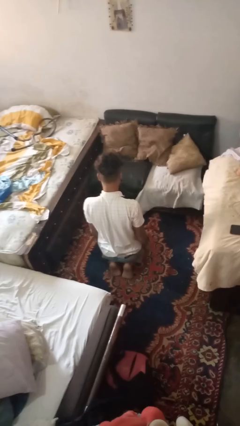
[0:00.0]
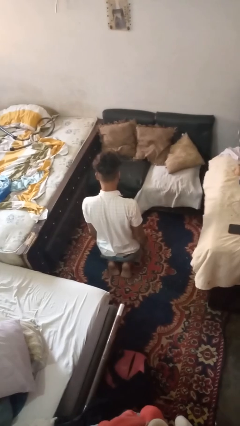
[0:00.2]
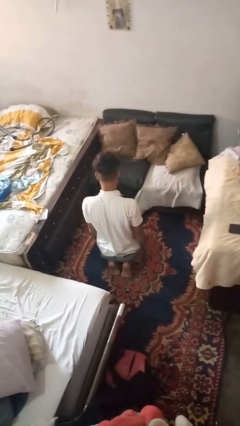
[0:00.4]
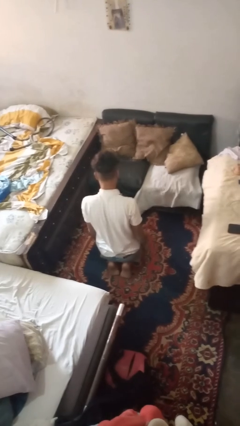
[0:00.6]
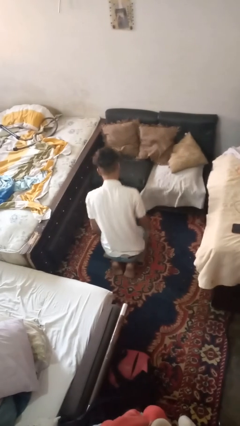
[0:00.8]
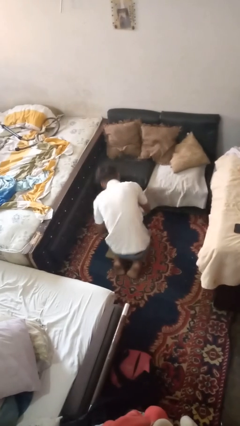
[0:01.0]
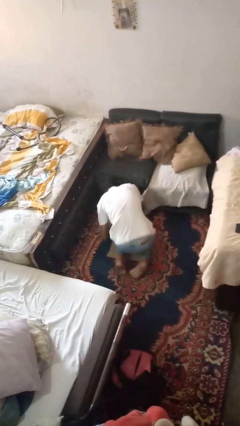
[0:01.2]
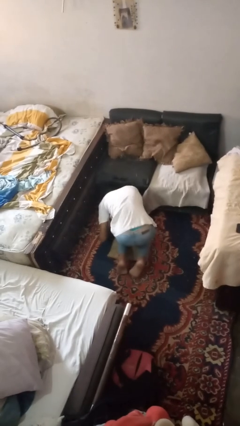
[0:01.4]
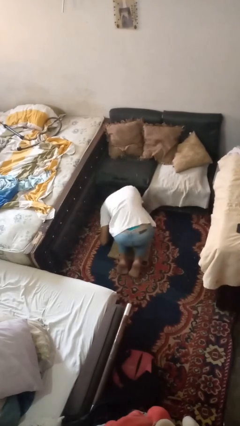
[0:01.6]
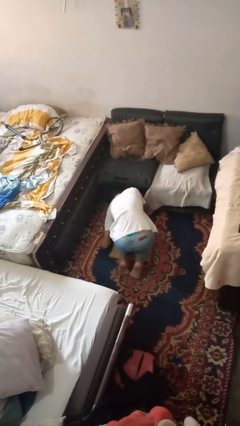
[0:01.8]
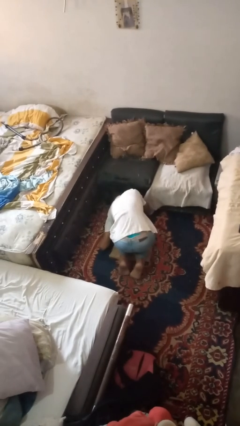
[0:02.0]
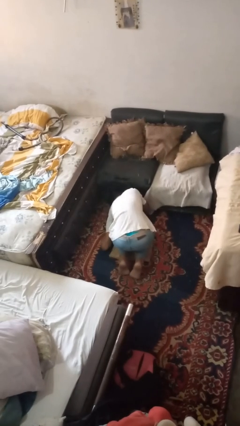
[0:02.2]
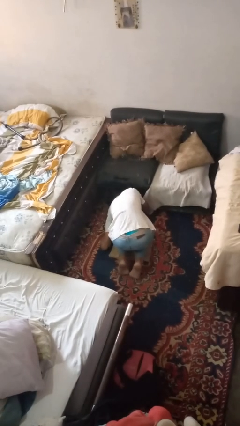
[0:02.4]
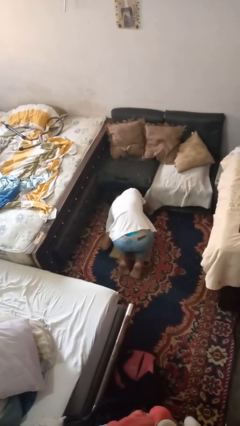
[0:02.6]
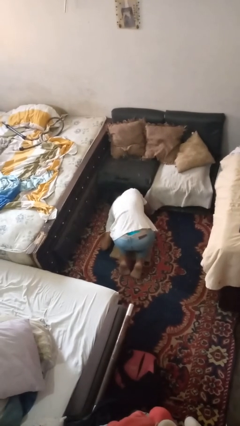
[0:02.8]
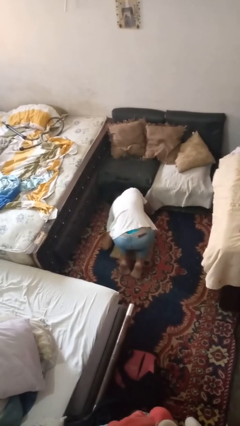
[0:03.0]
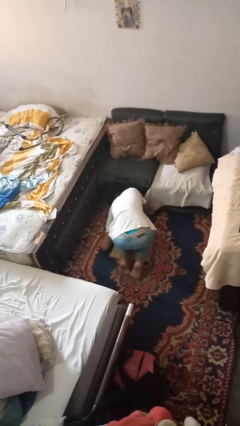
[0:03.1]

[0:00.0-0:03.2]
person searches under couch

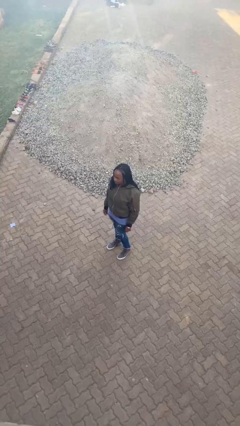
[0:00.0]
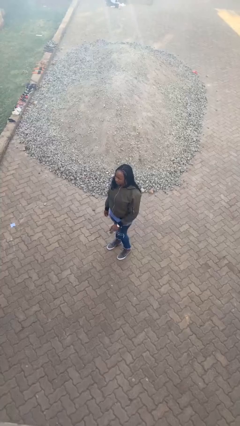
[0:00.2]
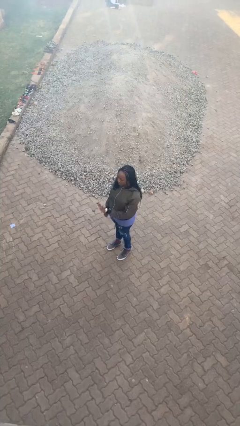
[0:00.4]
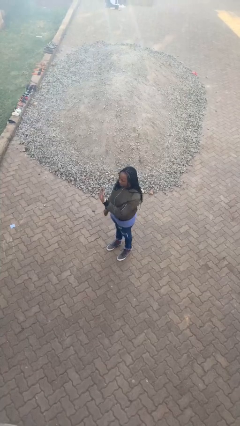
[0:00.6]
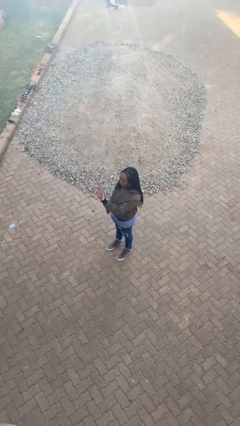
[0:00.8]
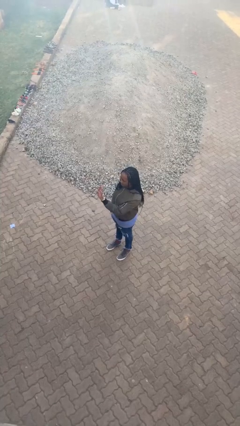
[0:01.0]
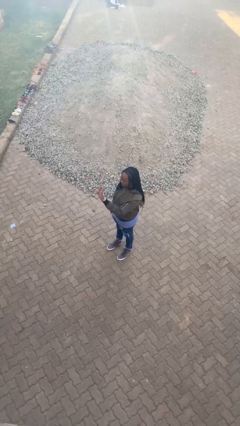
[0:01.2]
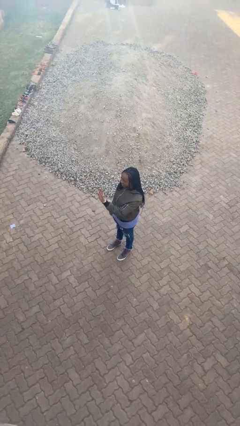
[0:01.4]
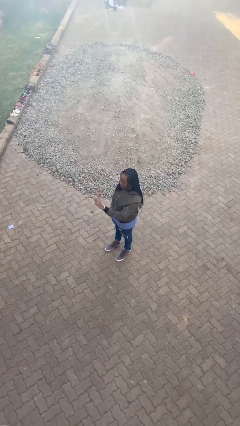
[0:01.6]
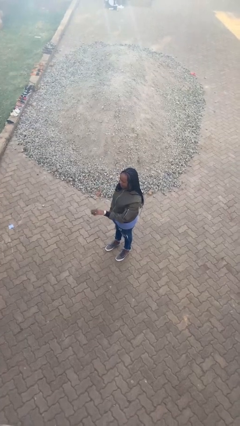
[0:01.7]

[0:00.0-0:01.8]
person gestures stop

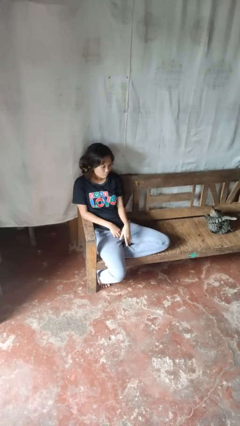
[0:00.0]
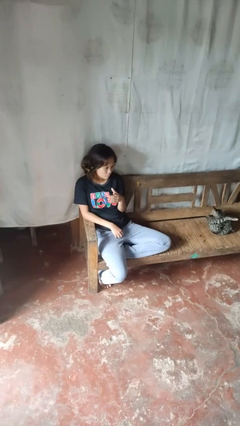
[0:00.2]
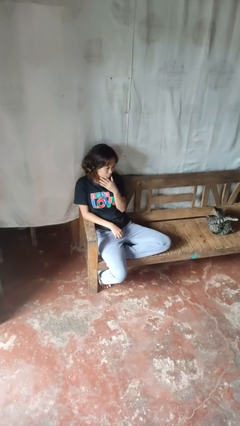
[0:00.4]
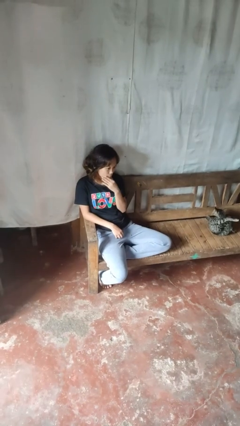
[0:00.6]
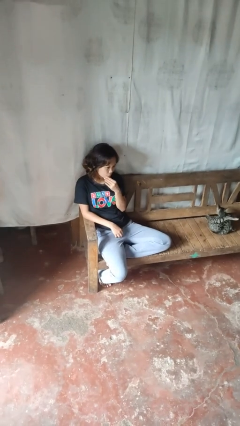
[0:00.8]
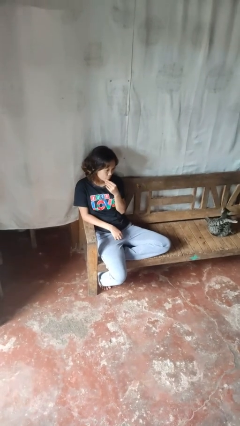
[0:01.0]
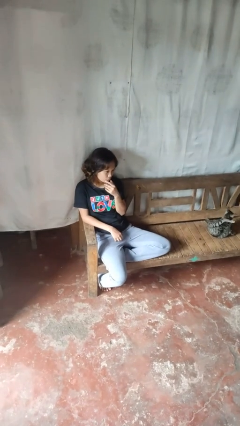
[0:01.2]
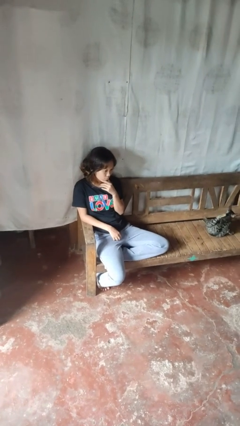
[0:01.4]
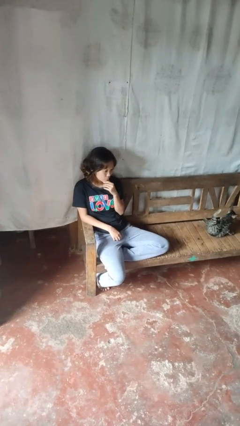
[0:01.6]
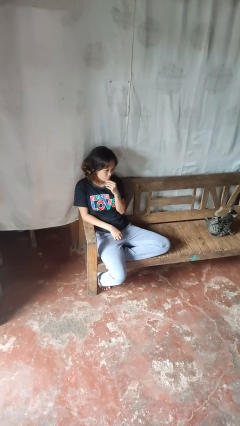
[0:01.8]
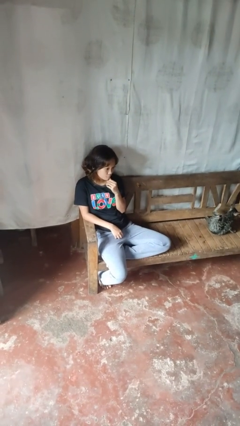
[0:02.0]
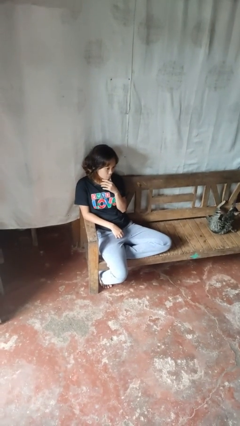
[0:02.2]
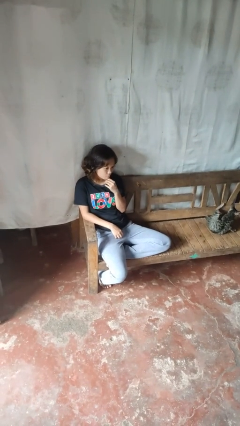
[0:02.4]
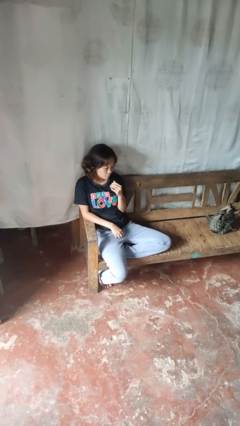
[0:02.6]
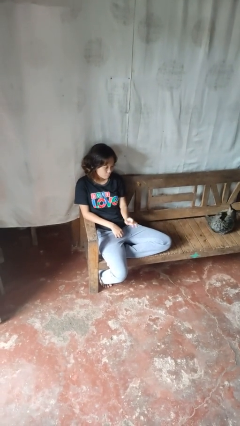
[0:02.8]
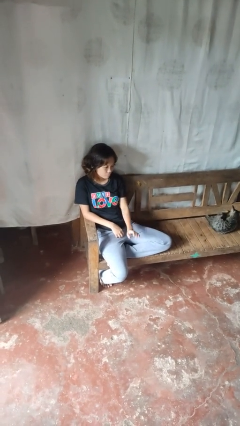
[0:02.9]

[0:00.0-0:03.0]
person strokes chin

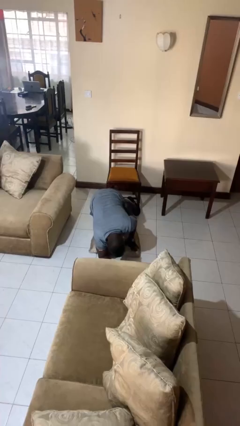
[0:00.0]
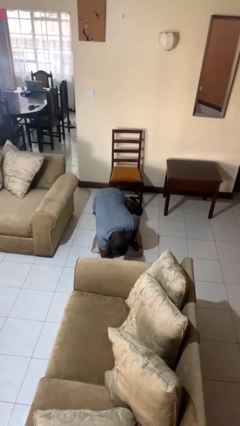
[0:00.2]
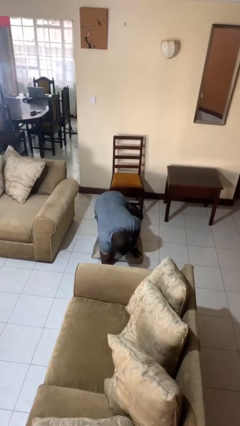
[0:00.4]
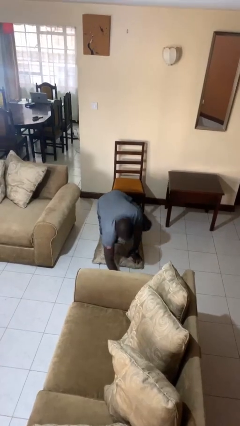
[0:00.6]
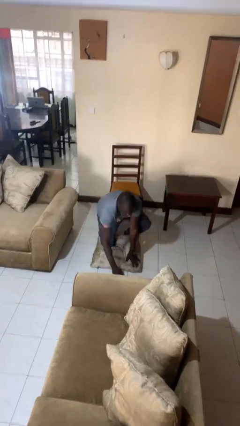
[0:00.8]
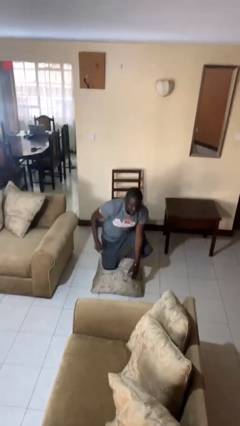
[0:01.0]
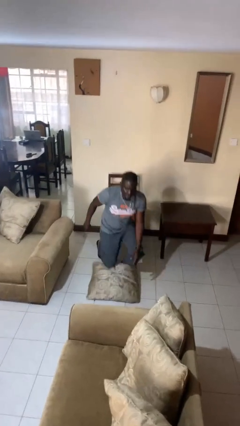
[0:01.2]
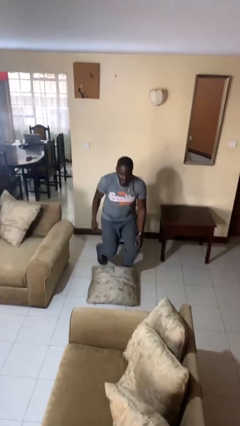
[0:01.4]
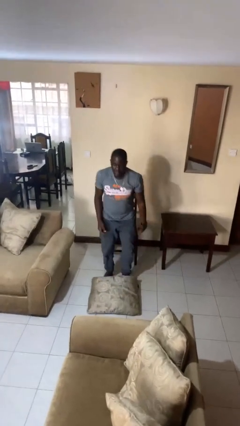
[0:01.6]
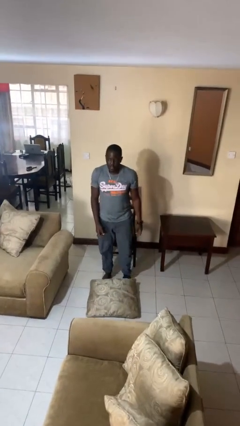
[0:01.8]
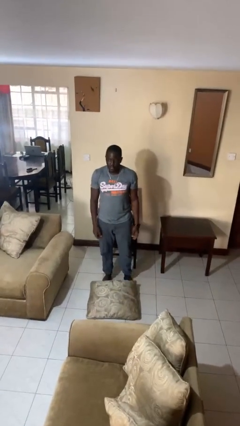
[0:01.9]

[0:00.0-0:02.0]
person stands up from floor

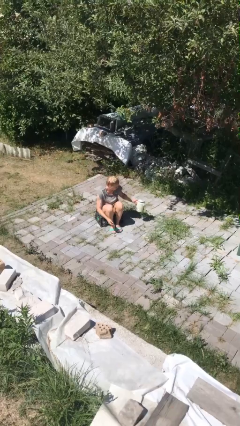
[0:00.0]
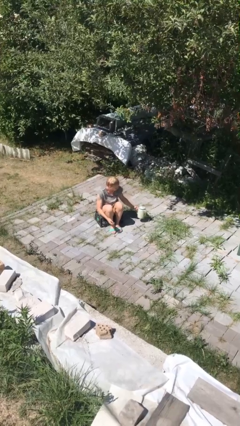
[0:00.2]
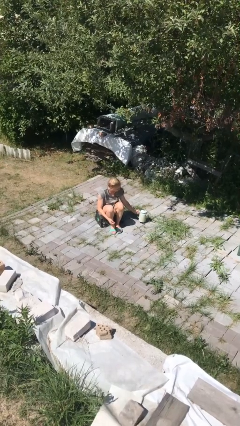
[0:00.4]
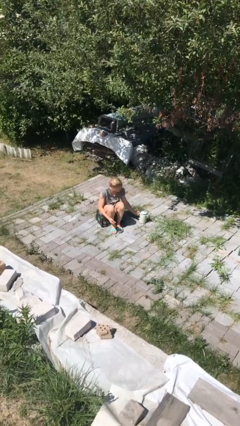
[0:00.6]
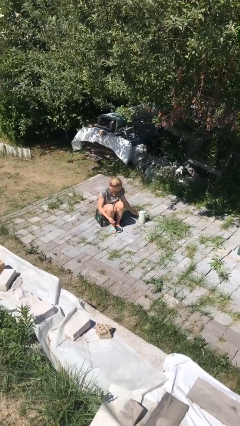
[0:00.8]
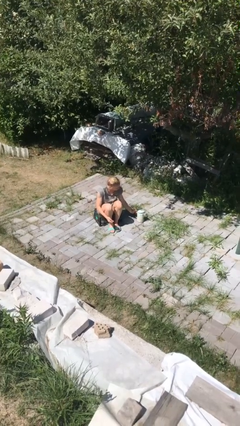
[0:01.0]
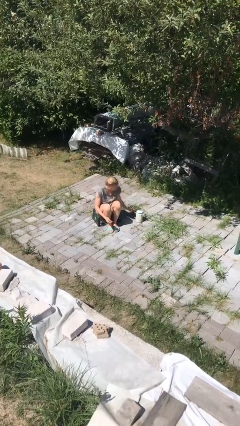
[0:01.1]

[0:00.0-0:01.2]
person puts down object on floor

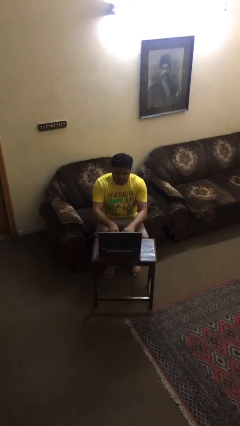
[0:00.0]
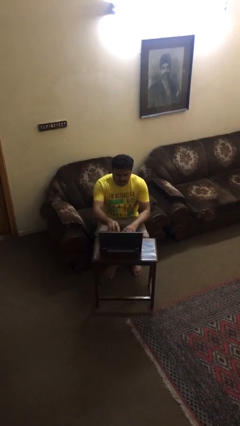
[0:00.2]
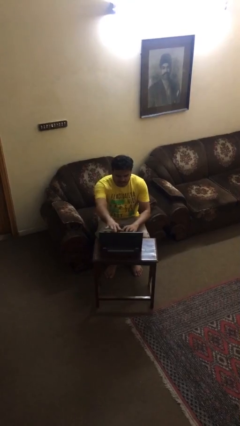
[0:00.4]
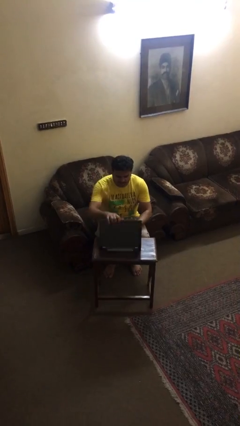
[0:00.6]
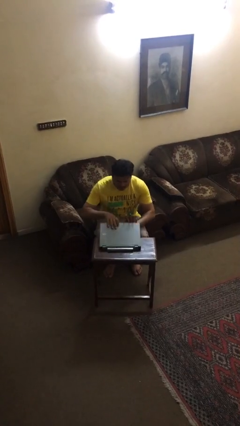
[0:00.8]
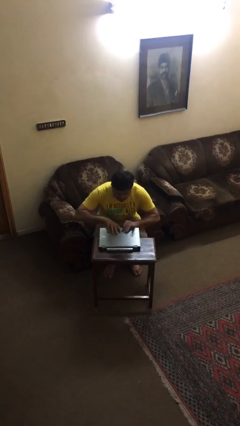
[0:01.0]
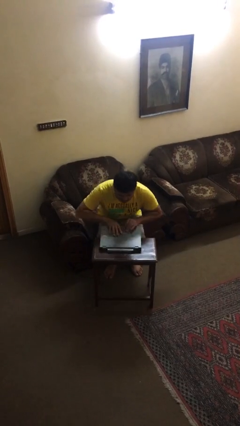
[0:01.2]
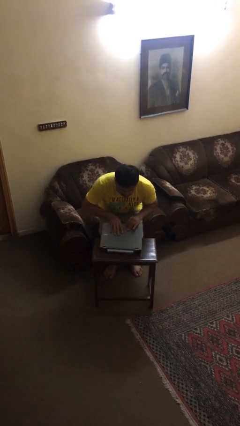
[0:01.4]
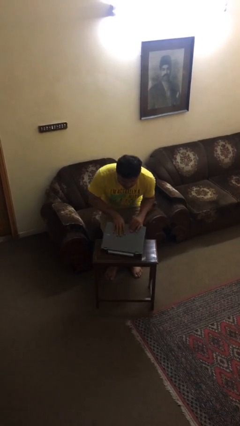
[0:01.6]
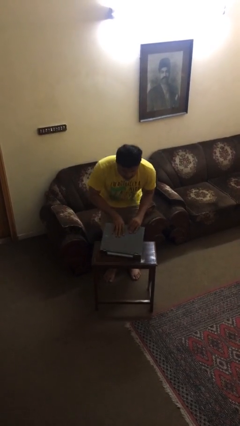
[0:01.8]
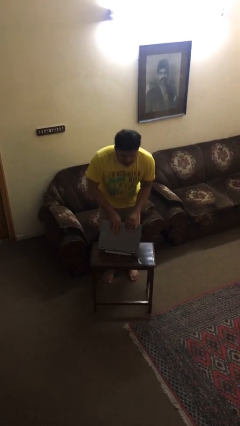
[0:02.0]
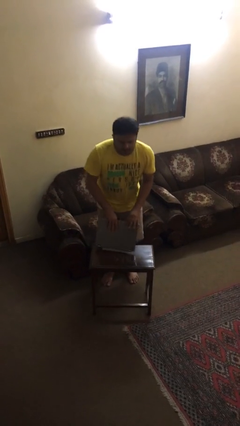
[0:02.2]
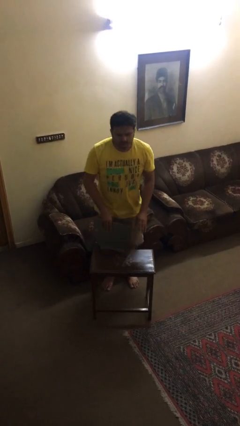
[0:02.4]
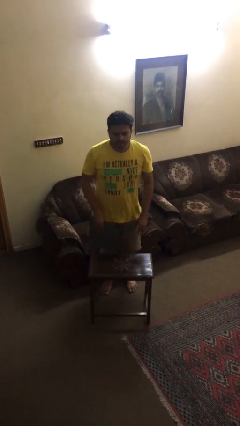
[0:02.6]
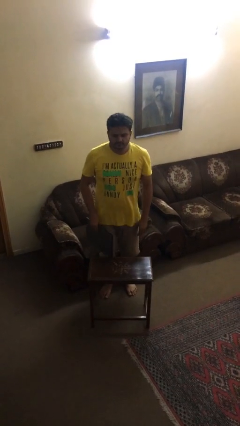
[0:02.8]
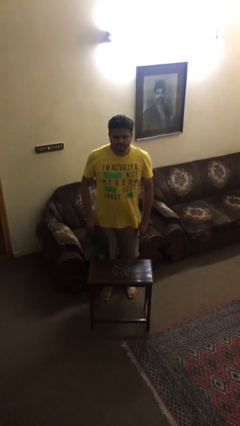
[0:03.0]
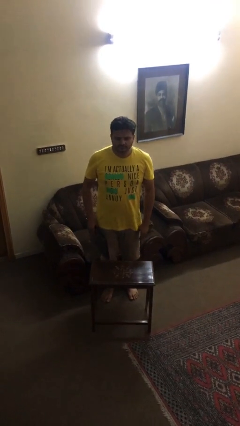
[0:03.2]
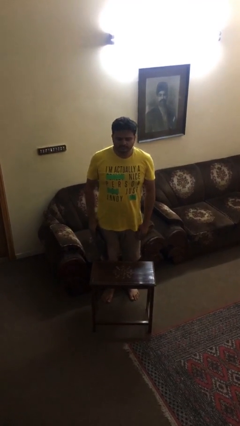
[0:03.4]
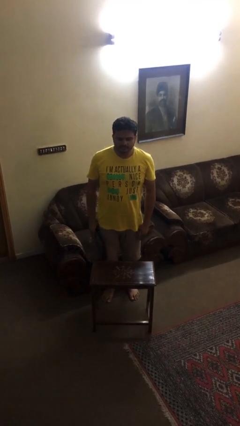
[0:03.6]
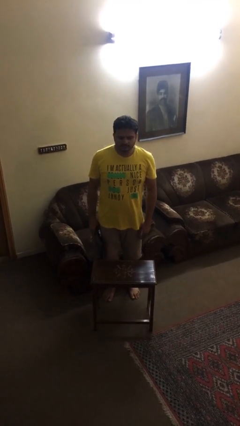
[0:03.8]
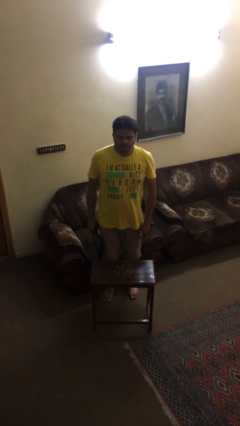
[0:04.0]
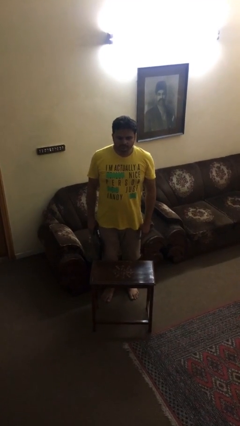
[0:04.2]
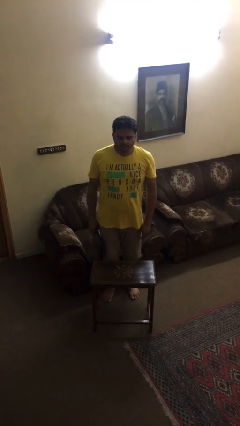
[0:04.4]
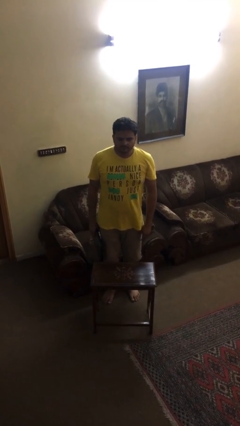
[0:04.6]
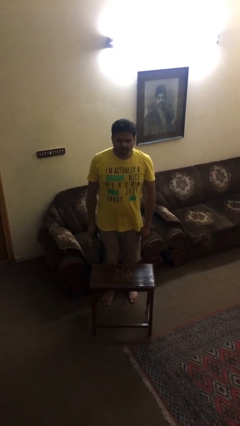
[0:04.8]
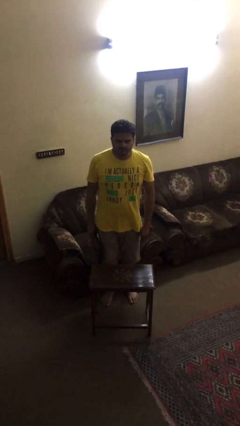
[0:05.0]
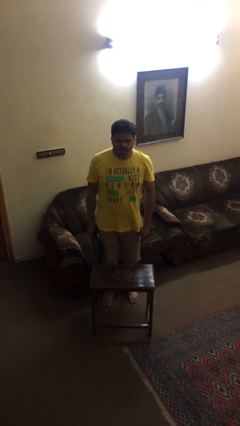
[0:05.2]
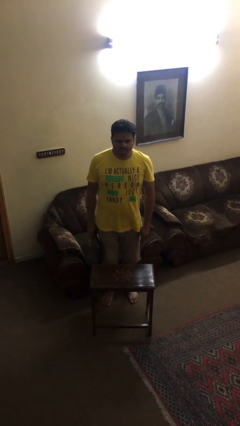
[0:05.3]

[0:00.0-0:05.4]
person stands up

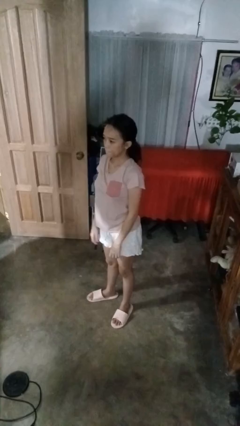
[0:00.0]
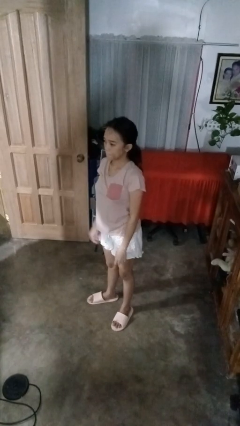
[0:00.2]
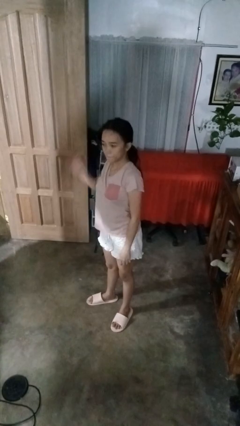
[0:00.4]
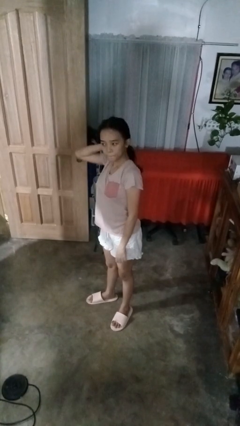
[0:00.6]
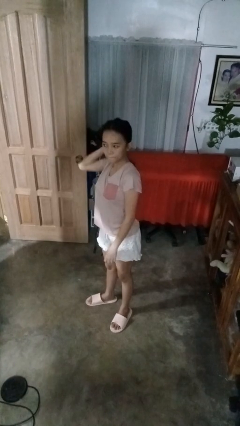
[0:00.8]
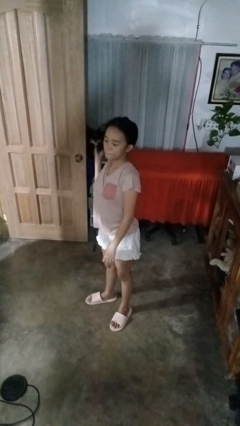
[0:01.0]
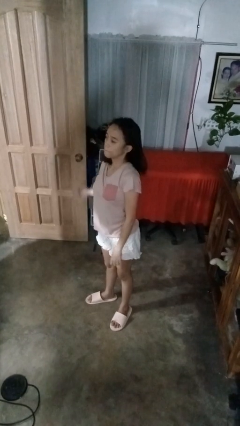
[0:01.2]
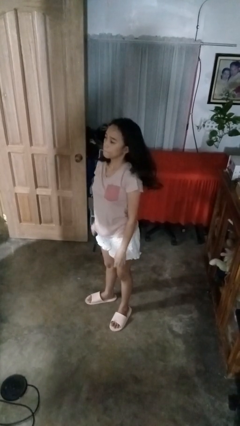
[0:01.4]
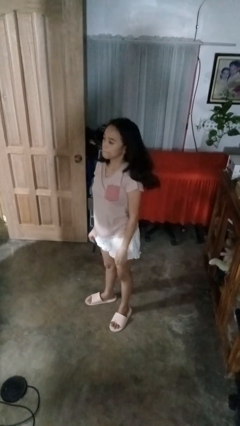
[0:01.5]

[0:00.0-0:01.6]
person takes off hairtie
